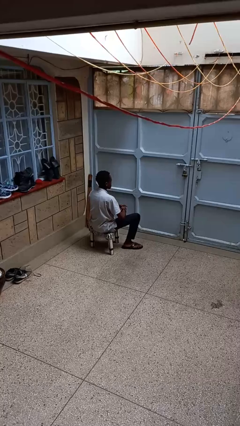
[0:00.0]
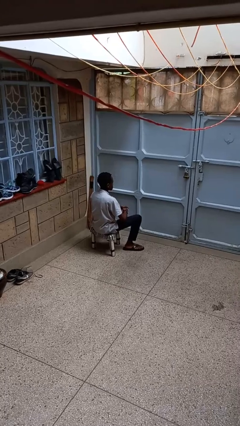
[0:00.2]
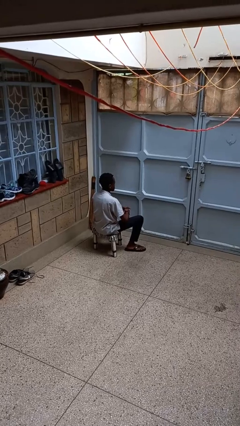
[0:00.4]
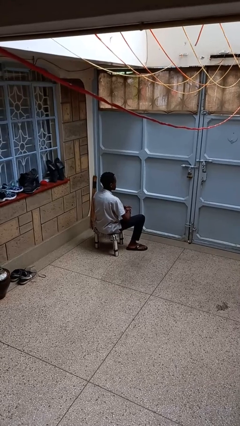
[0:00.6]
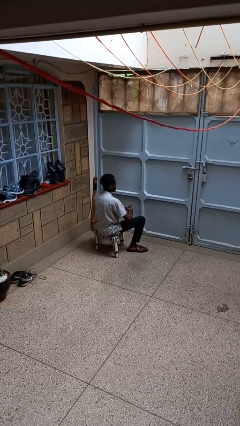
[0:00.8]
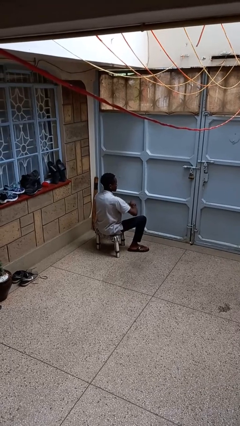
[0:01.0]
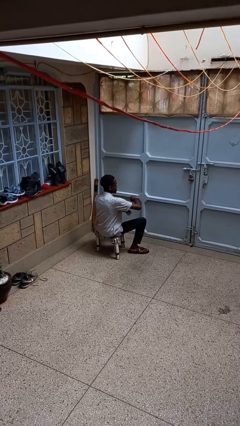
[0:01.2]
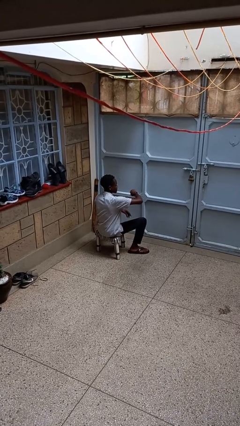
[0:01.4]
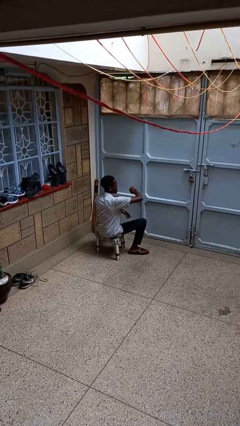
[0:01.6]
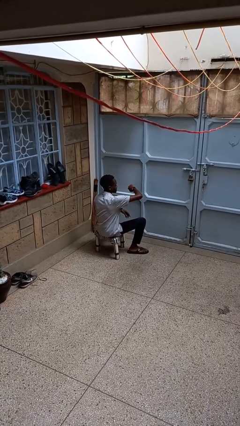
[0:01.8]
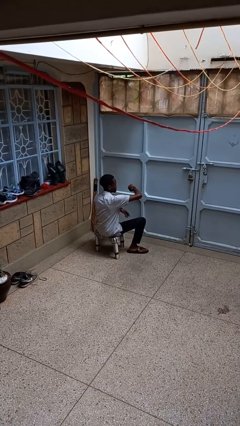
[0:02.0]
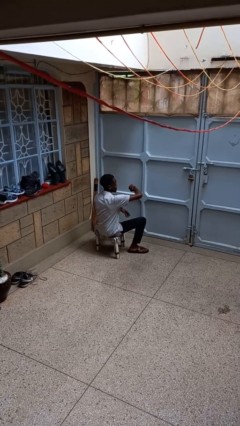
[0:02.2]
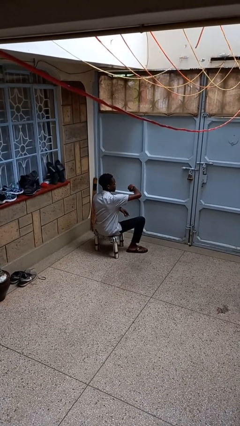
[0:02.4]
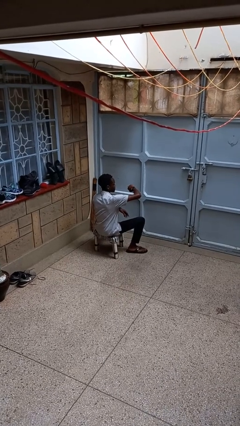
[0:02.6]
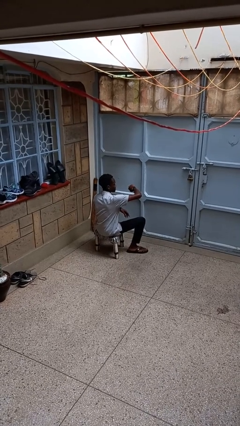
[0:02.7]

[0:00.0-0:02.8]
person looks at wristwatch

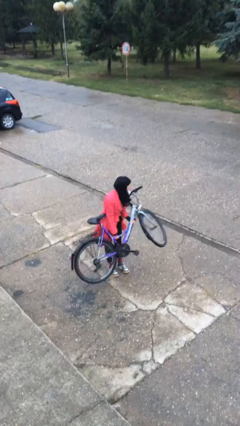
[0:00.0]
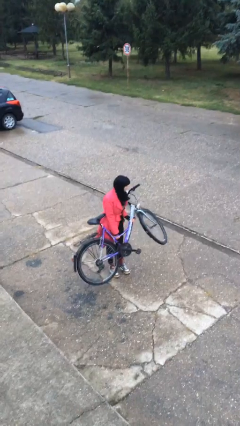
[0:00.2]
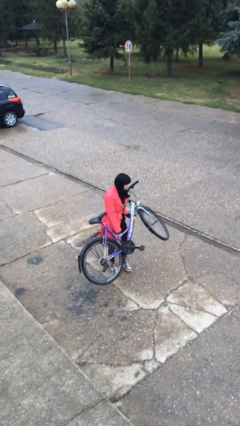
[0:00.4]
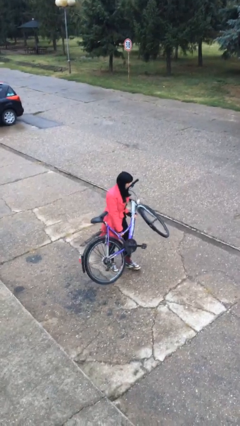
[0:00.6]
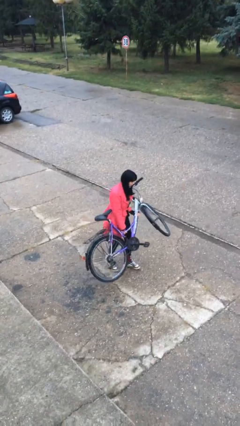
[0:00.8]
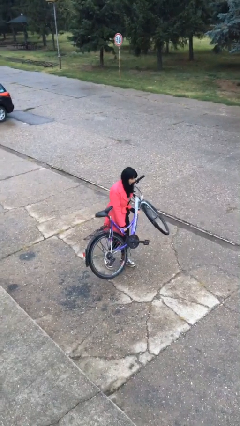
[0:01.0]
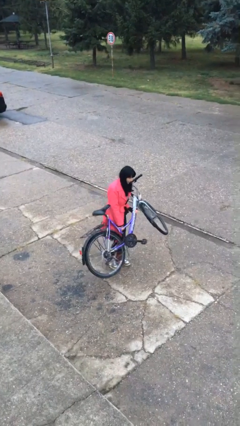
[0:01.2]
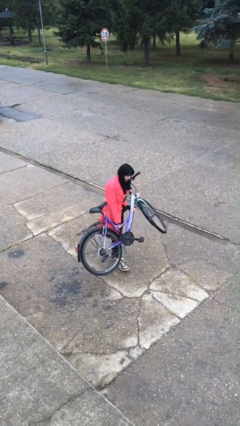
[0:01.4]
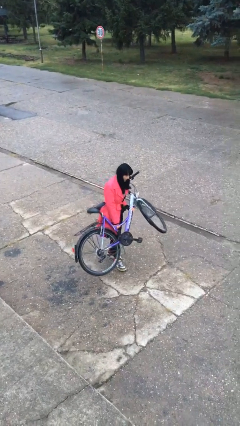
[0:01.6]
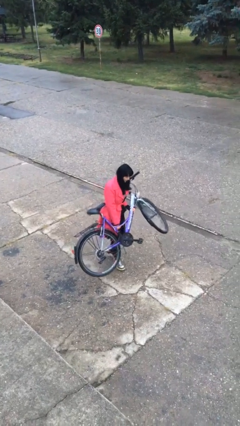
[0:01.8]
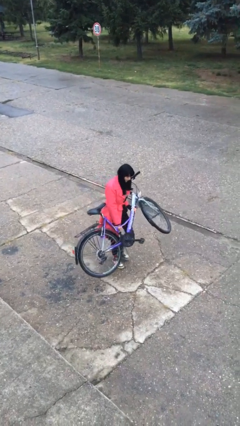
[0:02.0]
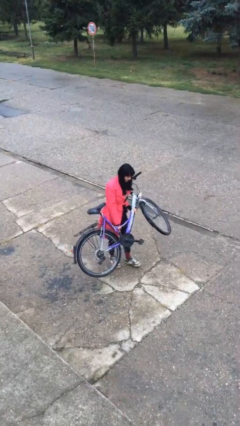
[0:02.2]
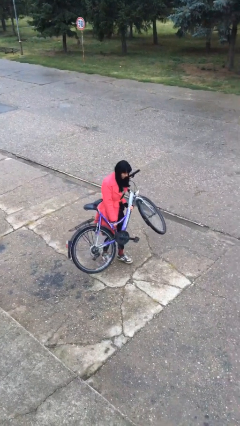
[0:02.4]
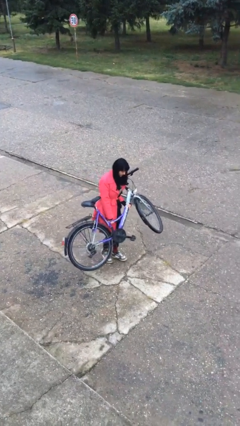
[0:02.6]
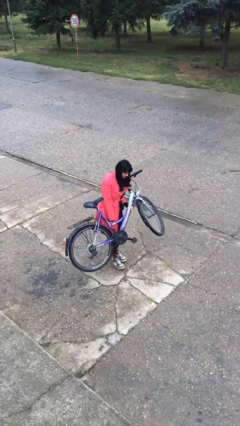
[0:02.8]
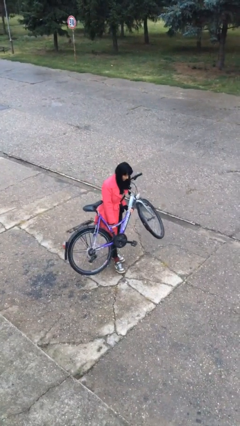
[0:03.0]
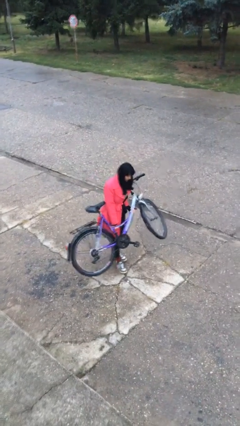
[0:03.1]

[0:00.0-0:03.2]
person carries heavy object

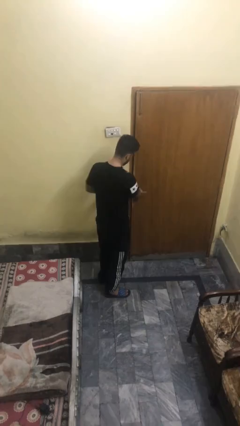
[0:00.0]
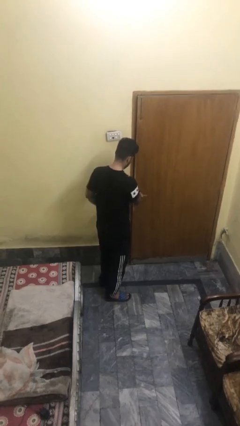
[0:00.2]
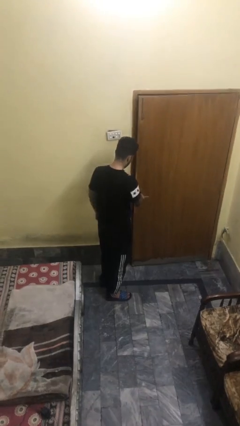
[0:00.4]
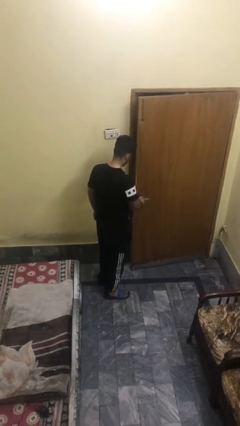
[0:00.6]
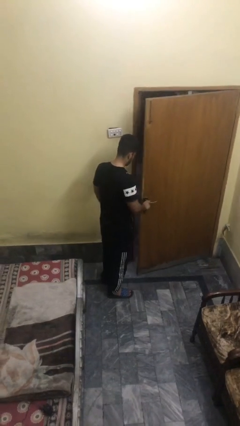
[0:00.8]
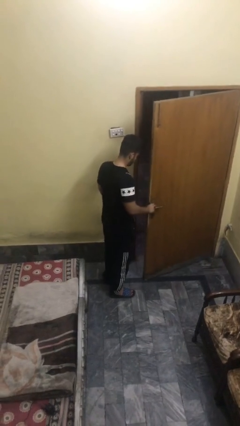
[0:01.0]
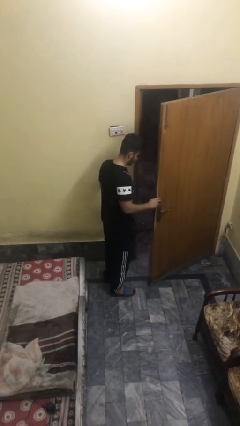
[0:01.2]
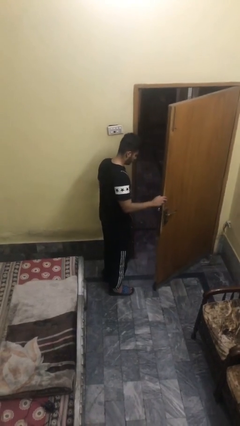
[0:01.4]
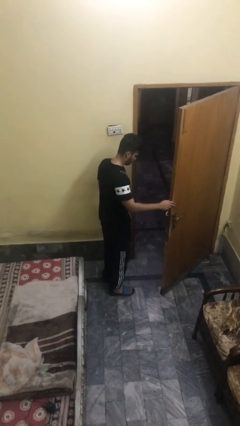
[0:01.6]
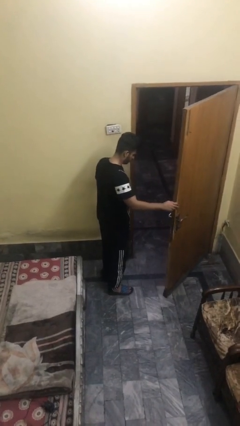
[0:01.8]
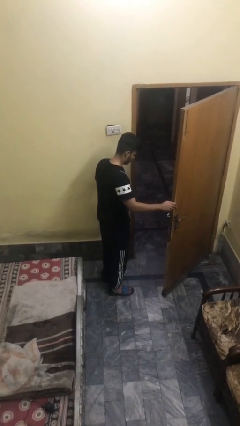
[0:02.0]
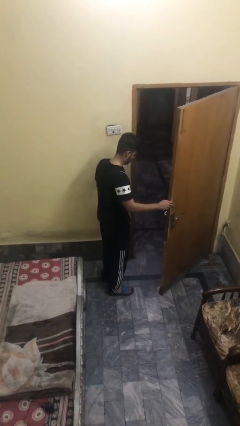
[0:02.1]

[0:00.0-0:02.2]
person opens facility door

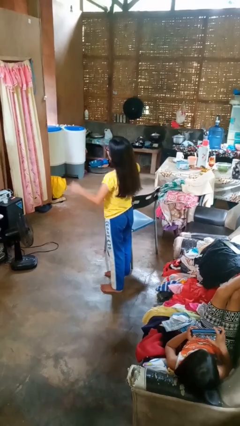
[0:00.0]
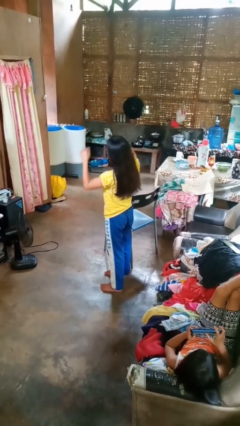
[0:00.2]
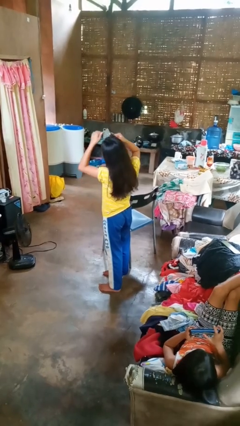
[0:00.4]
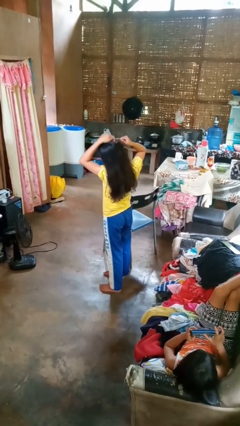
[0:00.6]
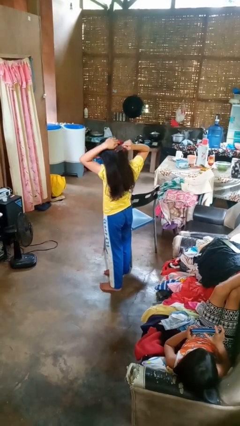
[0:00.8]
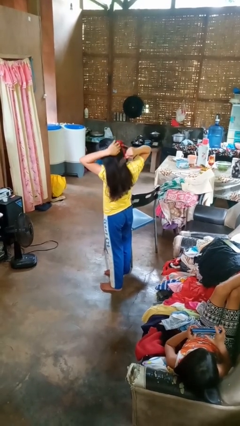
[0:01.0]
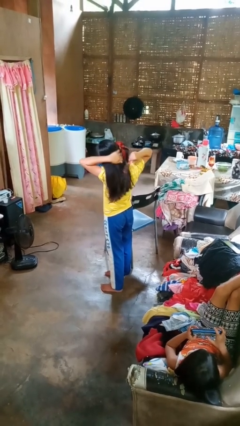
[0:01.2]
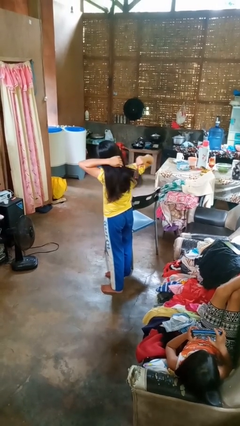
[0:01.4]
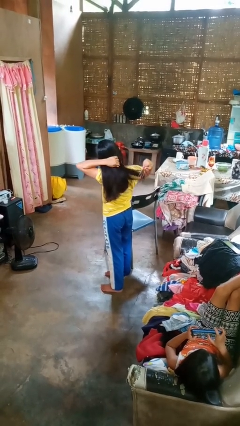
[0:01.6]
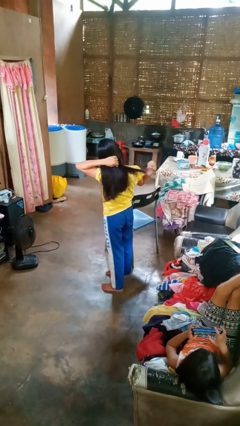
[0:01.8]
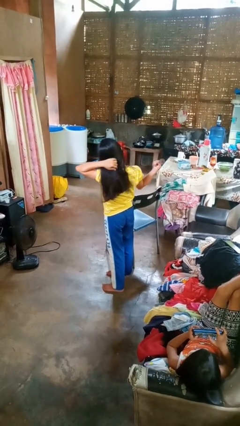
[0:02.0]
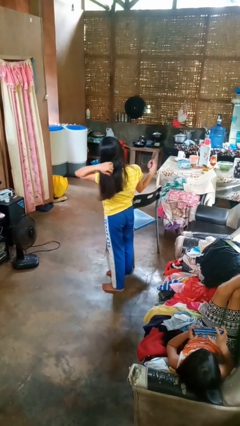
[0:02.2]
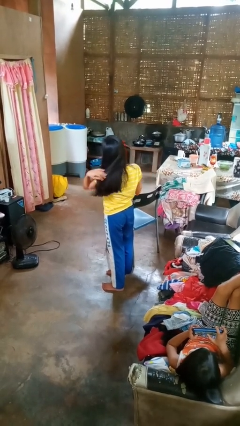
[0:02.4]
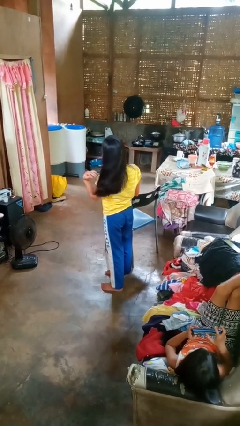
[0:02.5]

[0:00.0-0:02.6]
person brushes hair

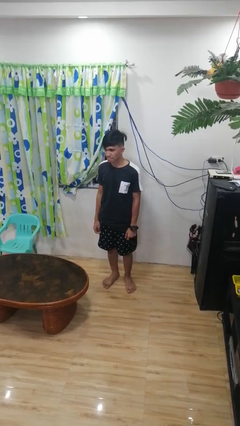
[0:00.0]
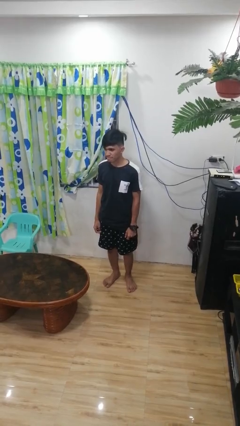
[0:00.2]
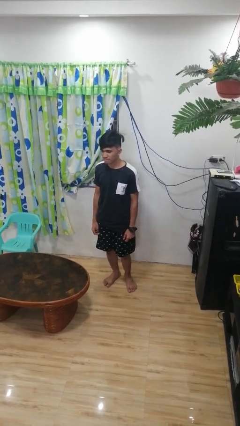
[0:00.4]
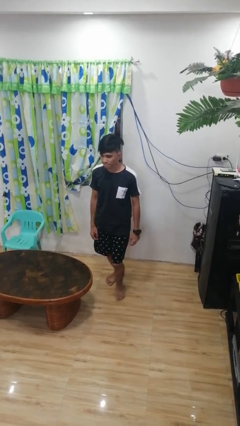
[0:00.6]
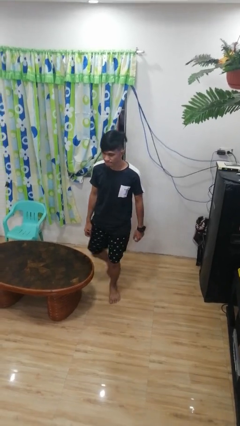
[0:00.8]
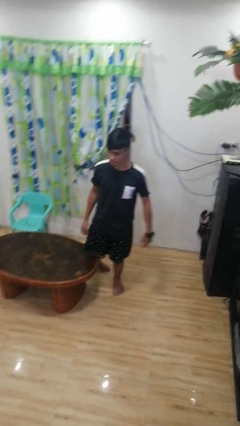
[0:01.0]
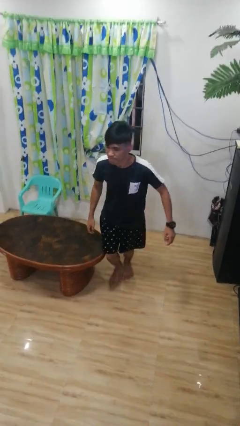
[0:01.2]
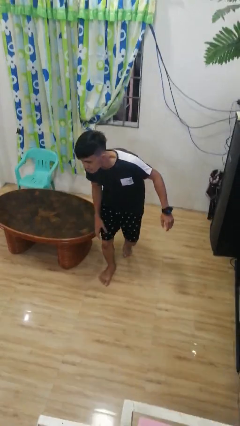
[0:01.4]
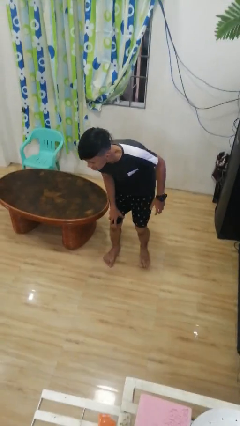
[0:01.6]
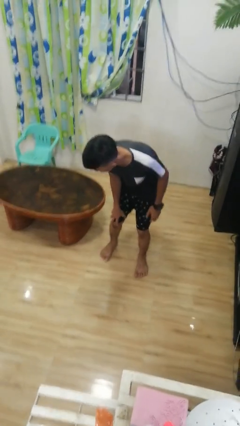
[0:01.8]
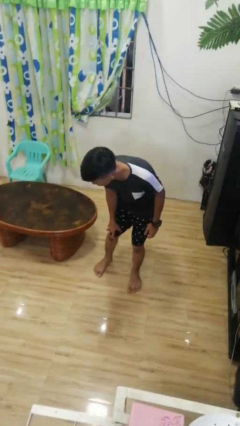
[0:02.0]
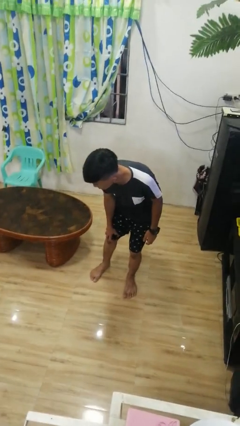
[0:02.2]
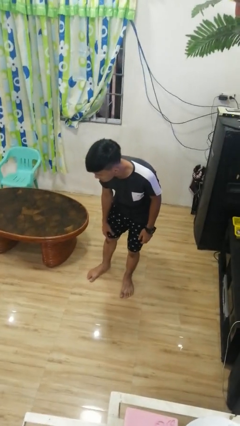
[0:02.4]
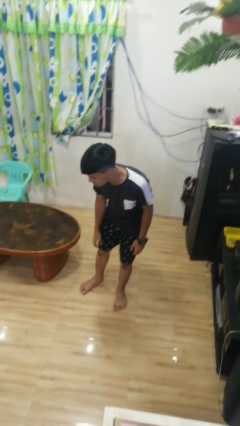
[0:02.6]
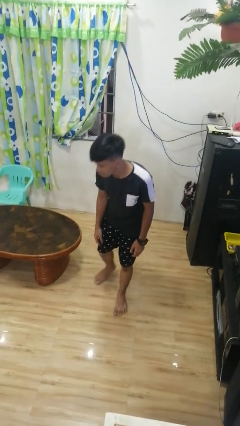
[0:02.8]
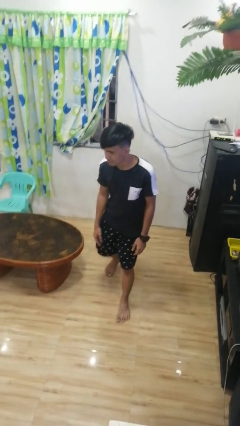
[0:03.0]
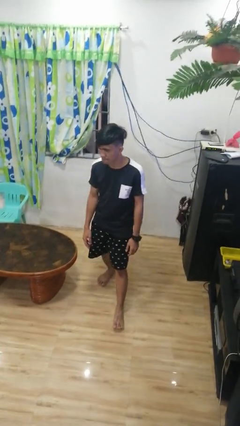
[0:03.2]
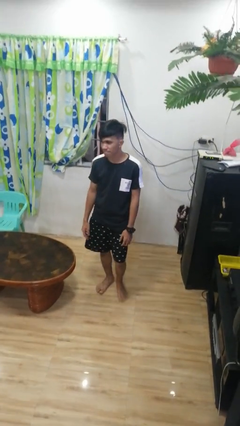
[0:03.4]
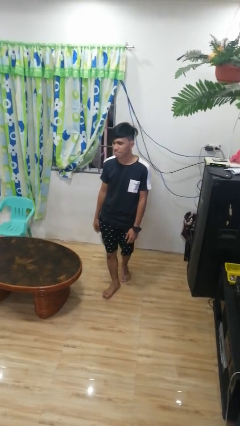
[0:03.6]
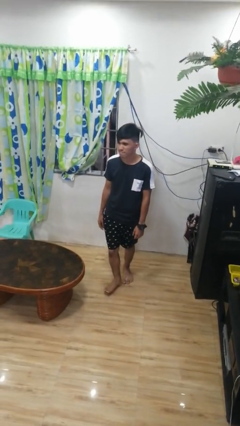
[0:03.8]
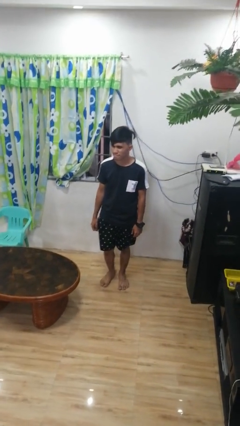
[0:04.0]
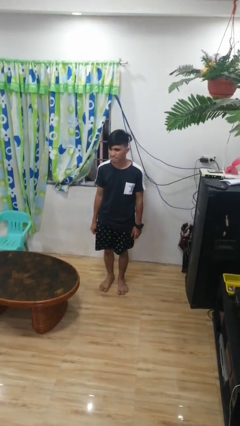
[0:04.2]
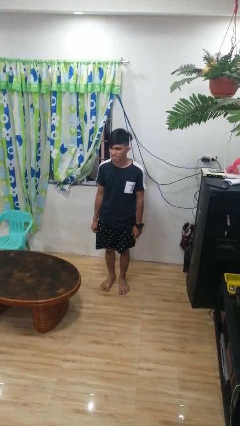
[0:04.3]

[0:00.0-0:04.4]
person bumps into table

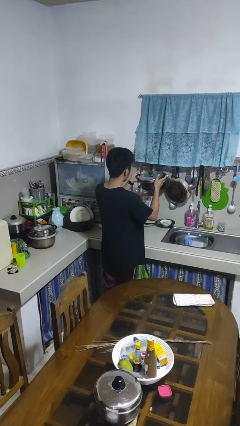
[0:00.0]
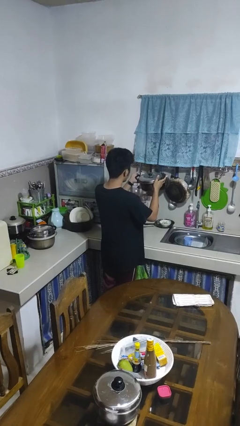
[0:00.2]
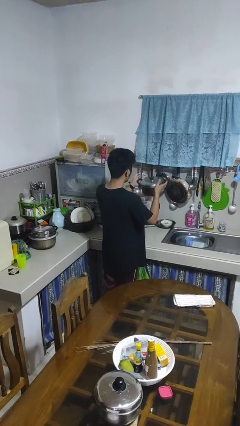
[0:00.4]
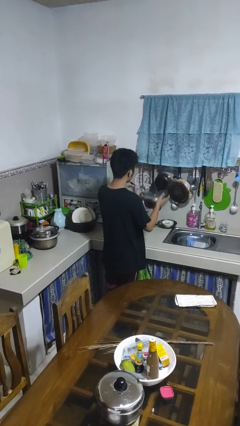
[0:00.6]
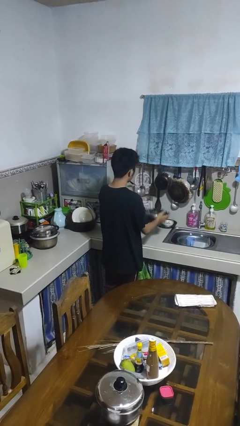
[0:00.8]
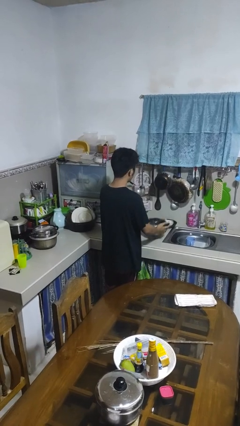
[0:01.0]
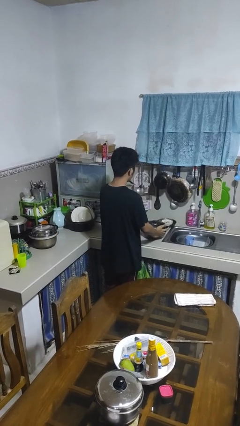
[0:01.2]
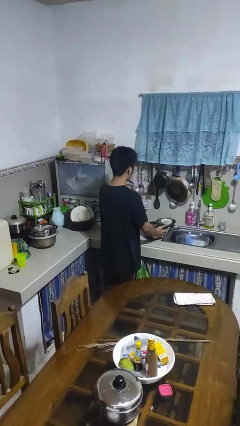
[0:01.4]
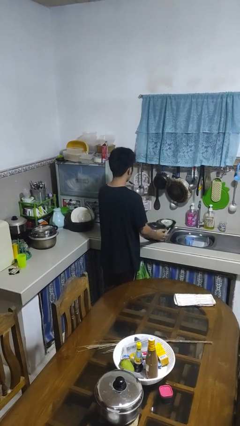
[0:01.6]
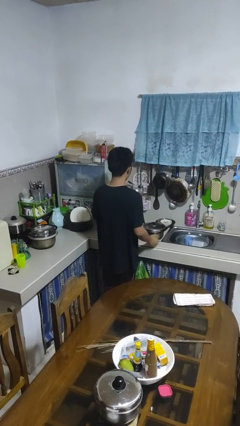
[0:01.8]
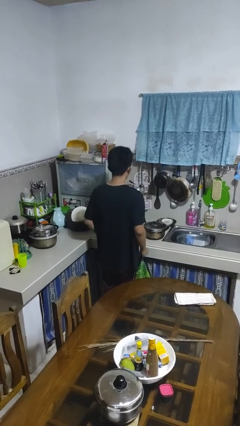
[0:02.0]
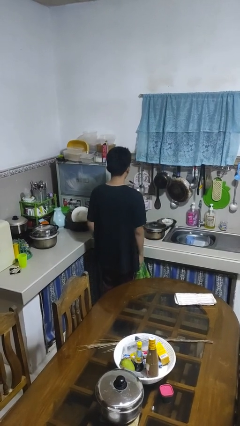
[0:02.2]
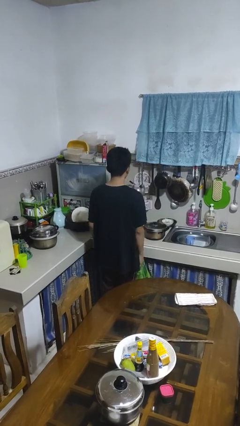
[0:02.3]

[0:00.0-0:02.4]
person puts down object on countertop

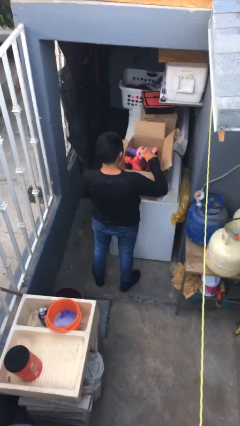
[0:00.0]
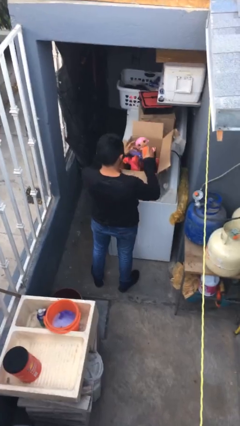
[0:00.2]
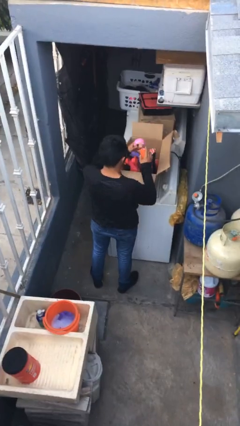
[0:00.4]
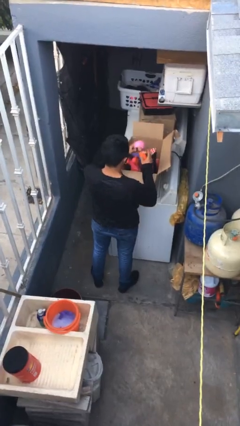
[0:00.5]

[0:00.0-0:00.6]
person takes object from box
